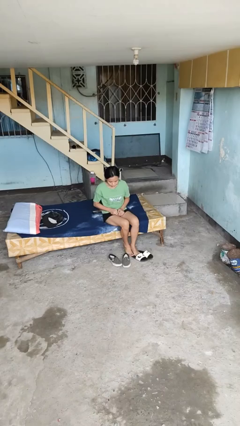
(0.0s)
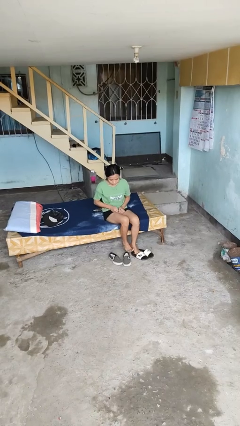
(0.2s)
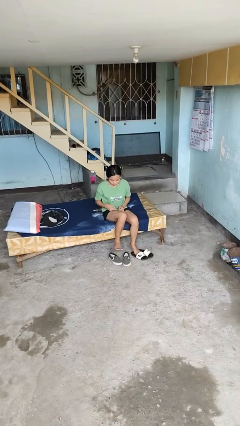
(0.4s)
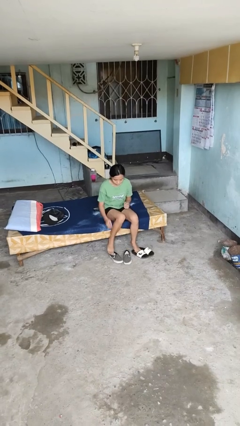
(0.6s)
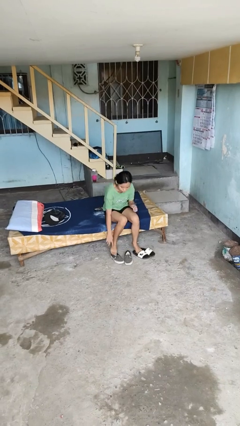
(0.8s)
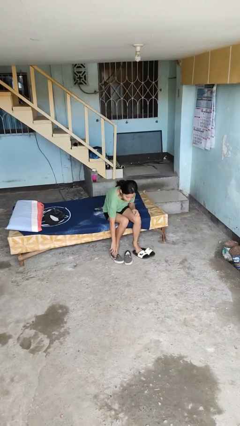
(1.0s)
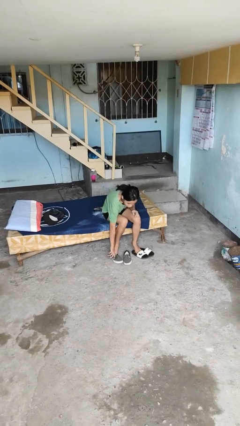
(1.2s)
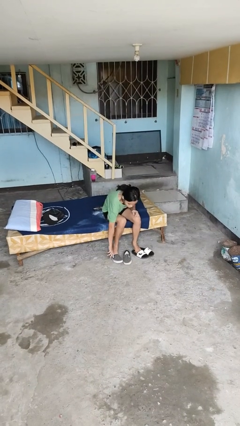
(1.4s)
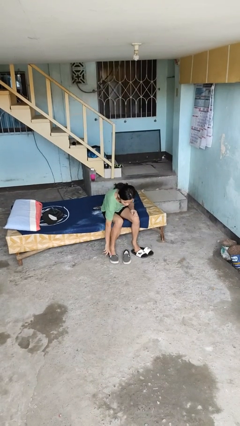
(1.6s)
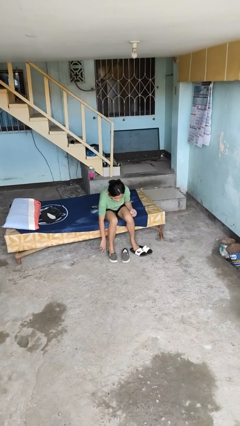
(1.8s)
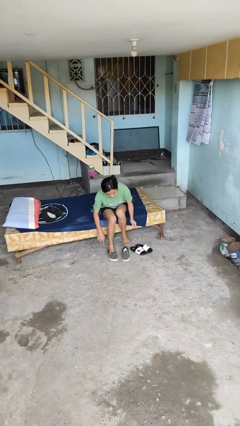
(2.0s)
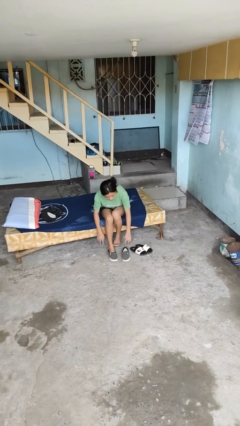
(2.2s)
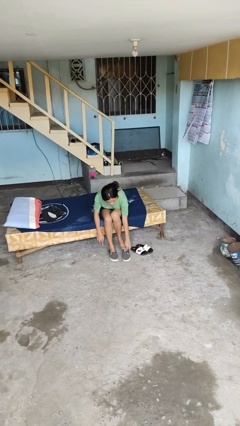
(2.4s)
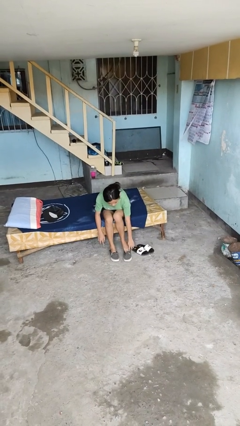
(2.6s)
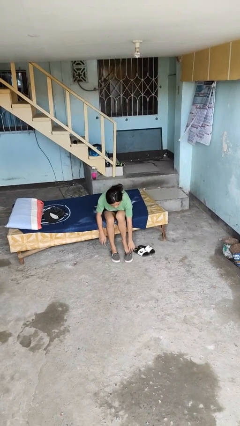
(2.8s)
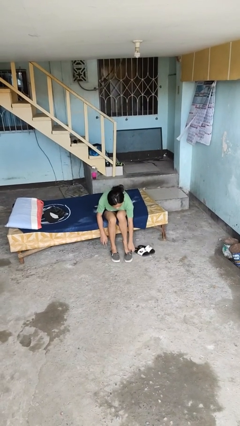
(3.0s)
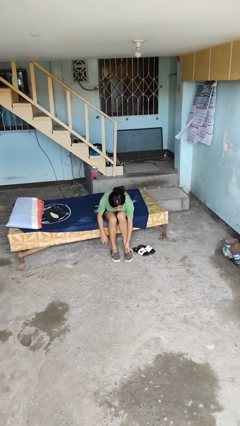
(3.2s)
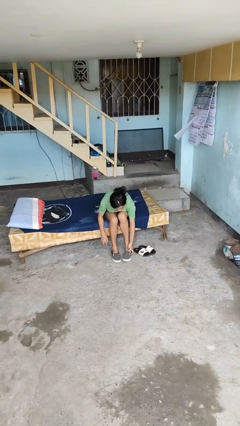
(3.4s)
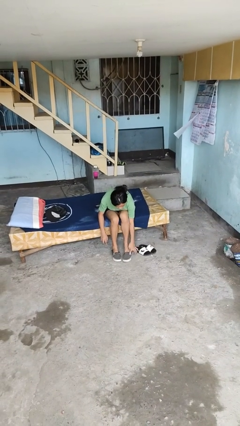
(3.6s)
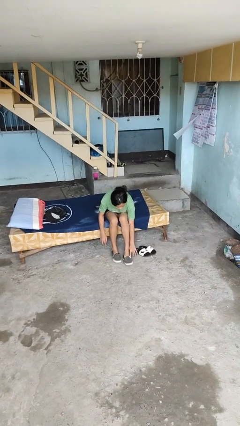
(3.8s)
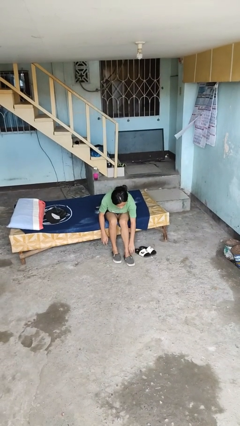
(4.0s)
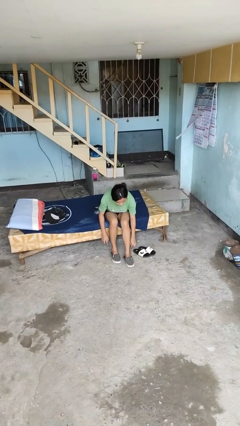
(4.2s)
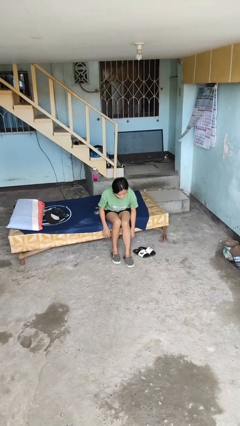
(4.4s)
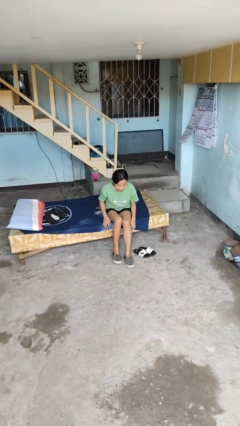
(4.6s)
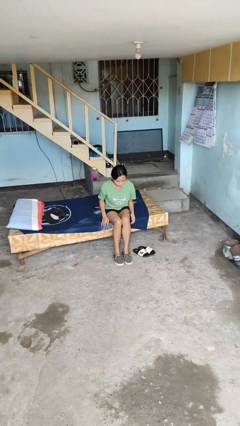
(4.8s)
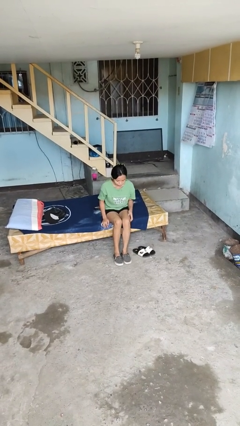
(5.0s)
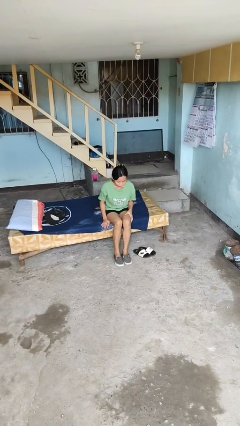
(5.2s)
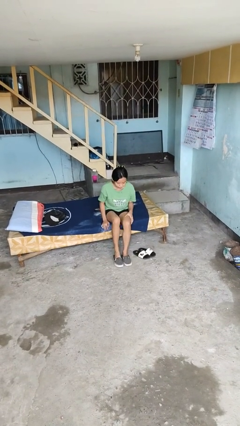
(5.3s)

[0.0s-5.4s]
person puts on shoes

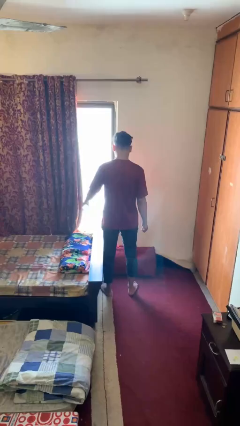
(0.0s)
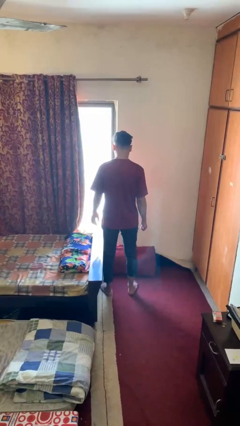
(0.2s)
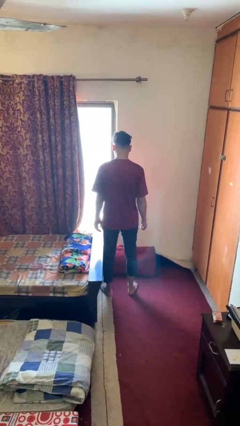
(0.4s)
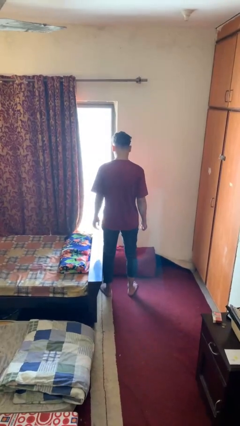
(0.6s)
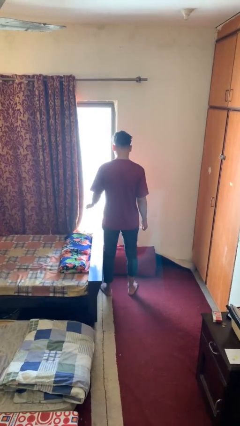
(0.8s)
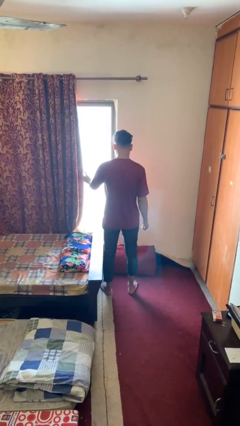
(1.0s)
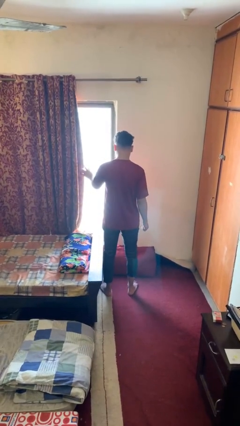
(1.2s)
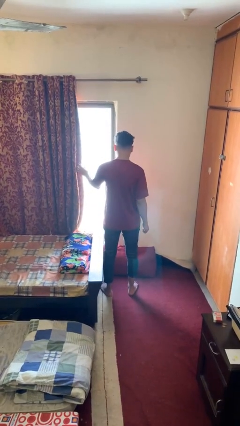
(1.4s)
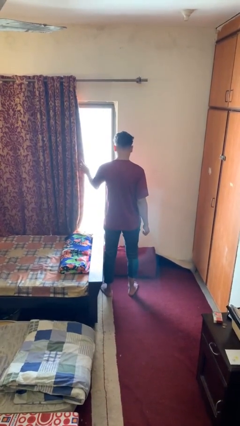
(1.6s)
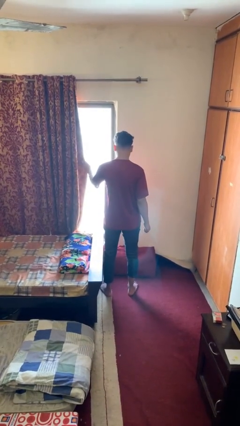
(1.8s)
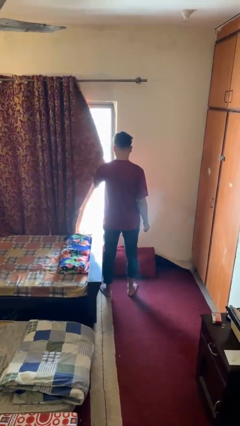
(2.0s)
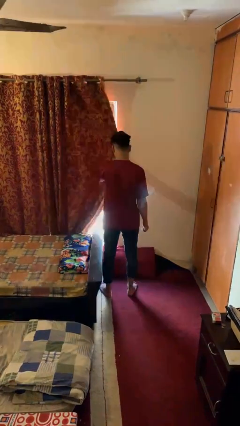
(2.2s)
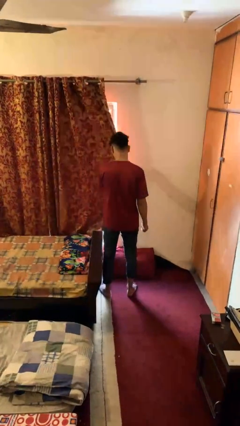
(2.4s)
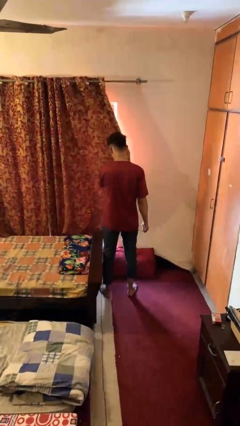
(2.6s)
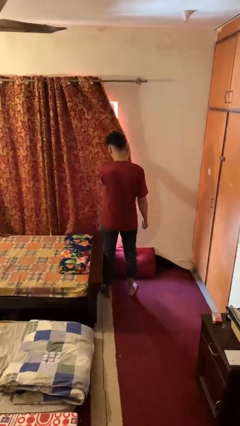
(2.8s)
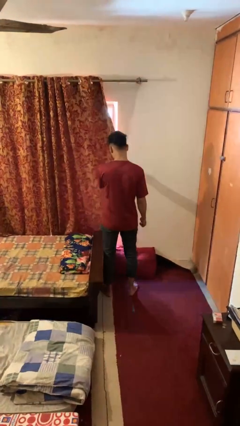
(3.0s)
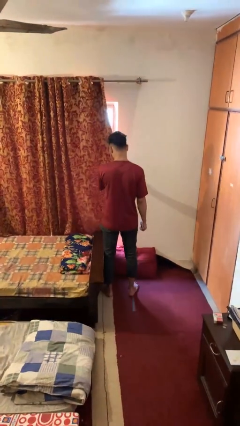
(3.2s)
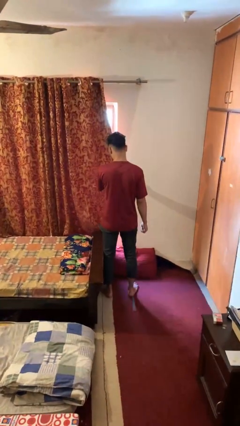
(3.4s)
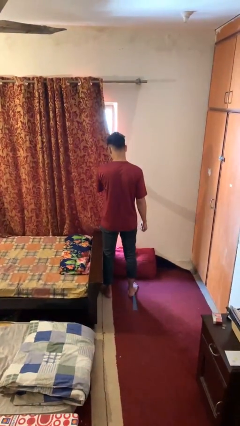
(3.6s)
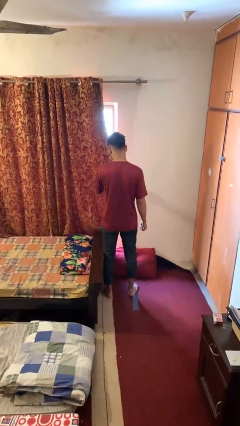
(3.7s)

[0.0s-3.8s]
person closes curtains

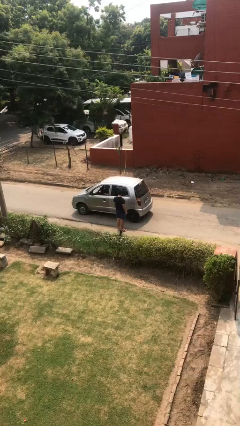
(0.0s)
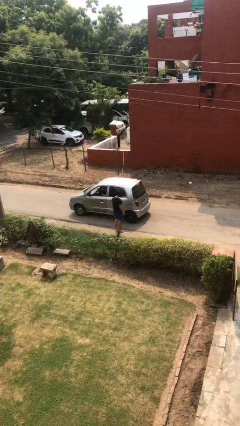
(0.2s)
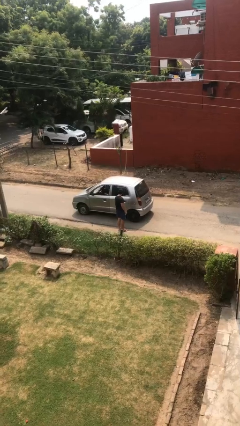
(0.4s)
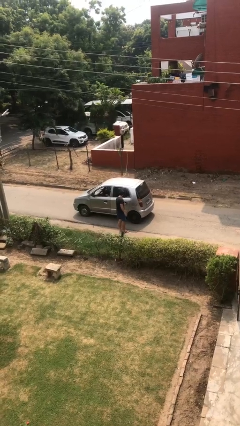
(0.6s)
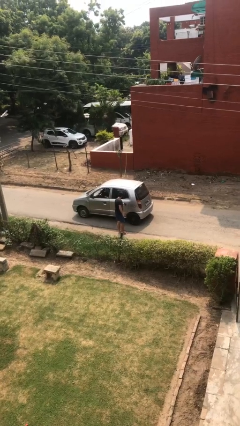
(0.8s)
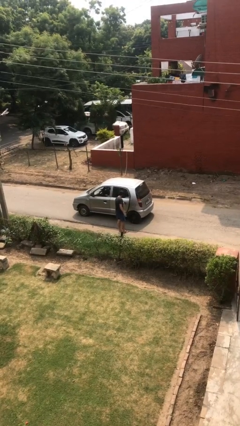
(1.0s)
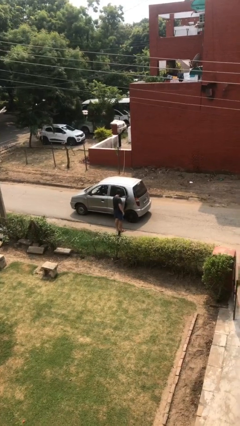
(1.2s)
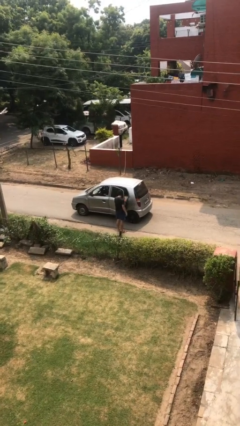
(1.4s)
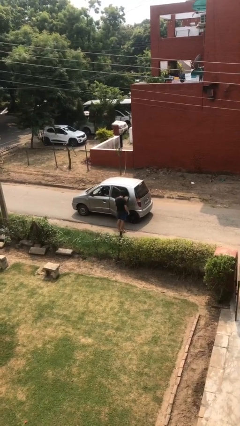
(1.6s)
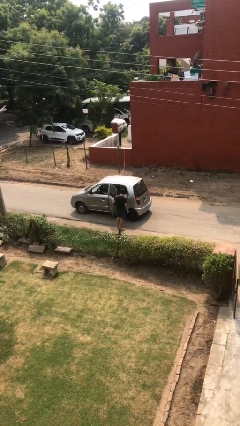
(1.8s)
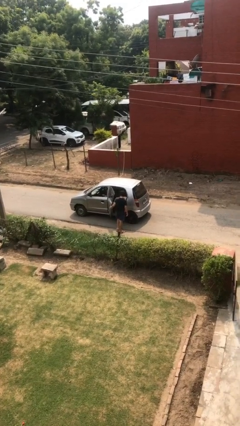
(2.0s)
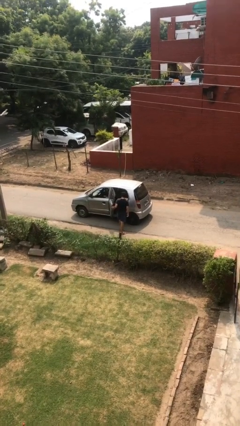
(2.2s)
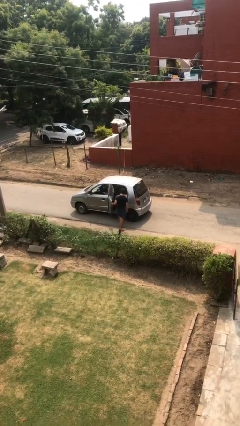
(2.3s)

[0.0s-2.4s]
person opens car door

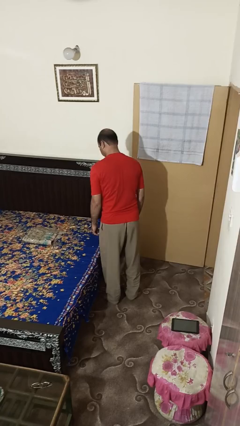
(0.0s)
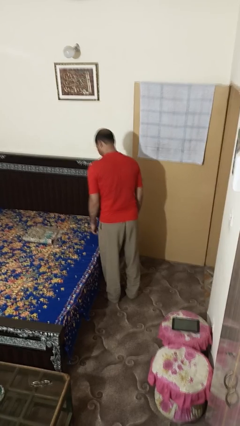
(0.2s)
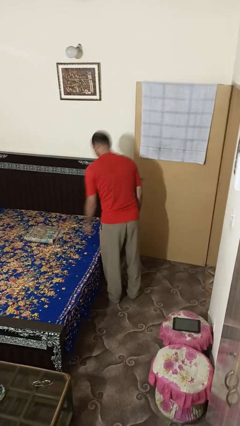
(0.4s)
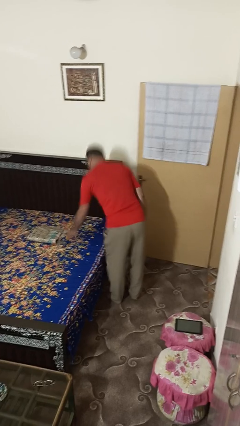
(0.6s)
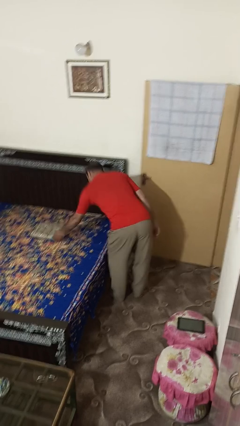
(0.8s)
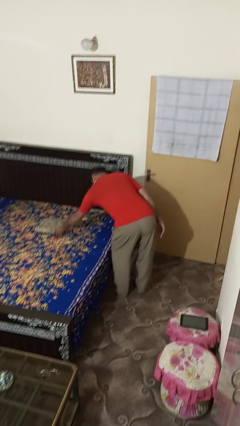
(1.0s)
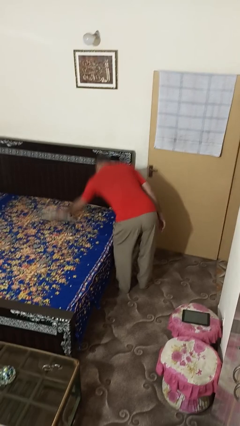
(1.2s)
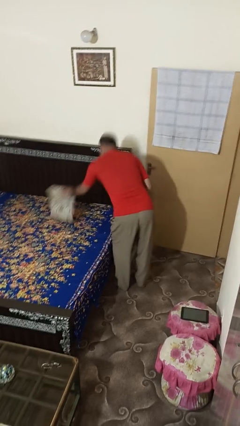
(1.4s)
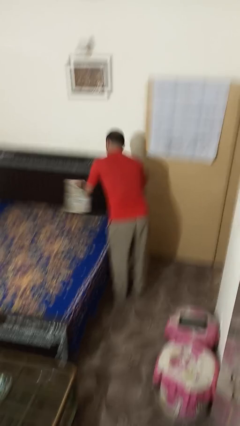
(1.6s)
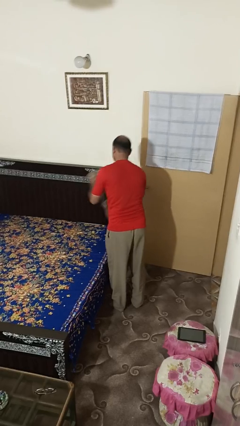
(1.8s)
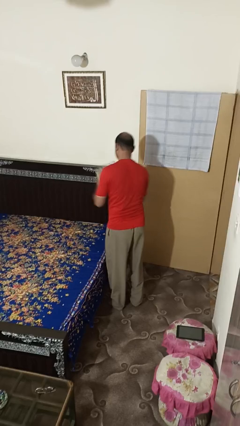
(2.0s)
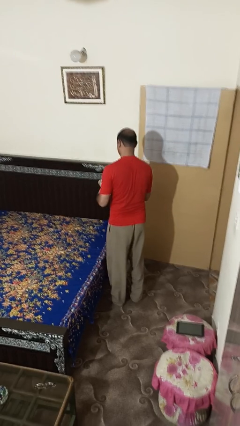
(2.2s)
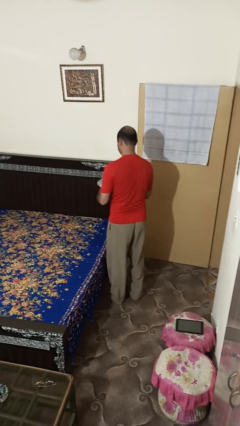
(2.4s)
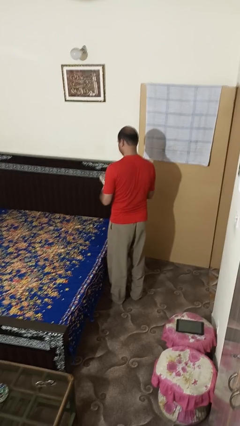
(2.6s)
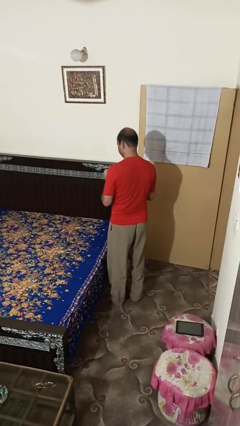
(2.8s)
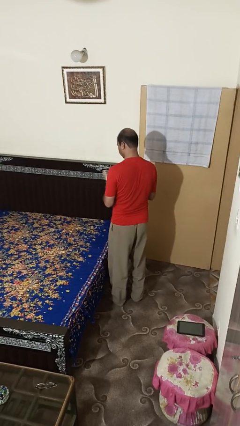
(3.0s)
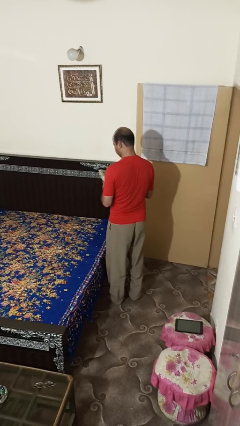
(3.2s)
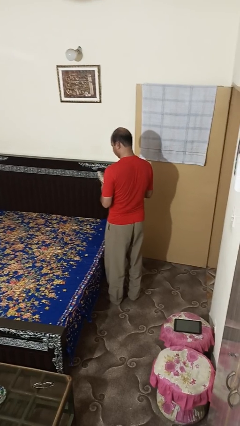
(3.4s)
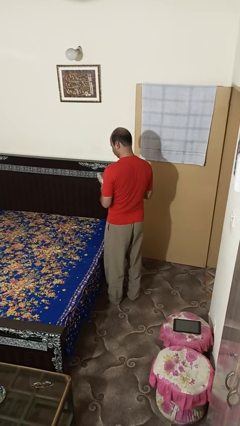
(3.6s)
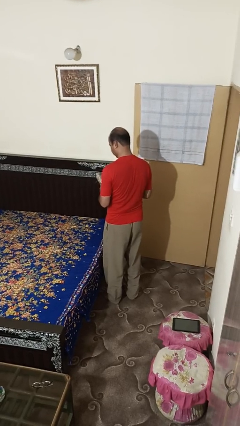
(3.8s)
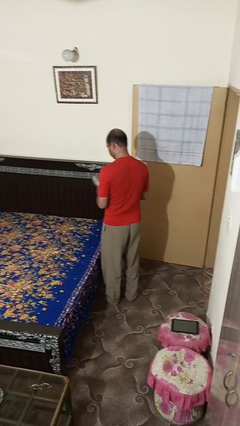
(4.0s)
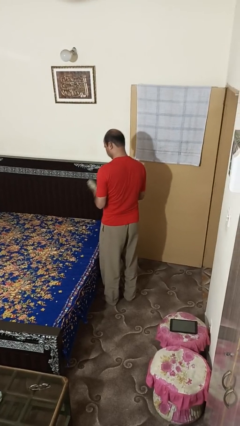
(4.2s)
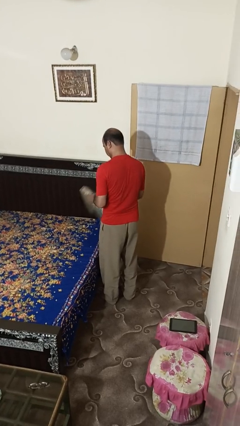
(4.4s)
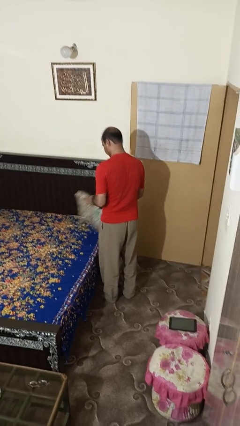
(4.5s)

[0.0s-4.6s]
person picks up object from bed

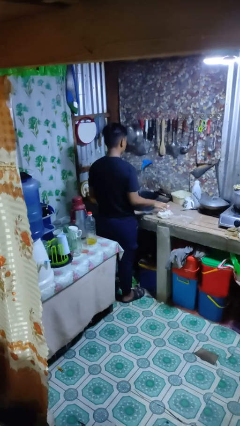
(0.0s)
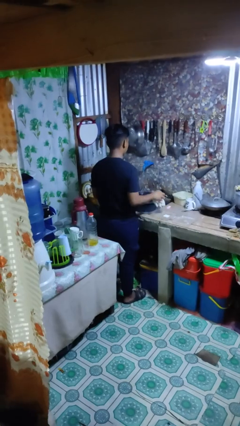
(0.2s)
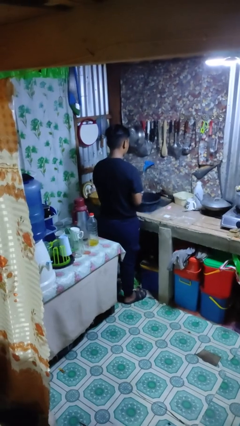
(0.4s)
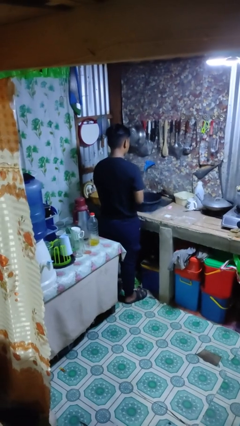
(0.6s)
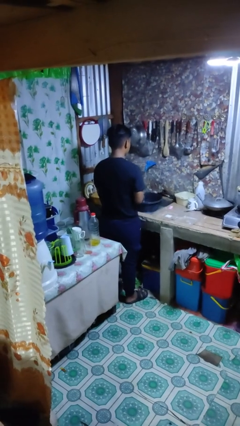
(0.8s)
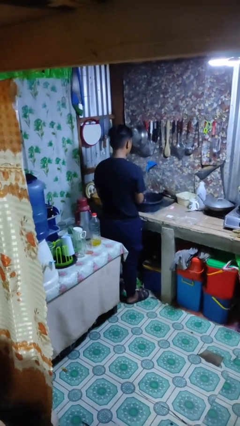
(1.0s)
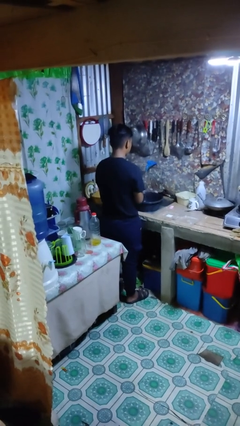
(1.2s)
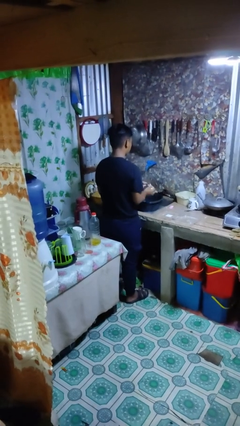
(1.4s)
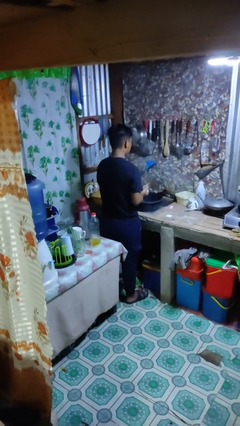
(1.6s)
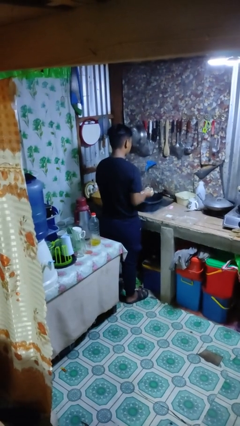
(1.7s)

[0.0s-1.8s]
person dries hands with towel
